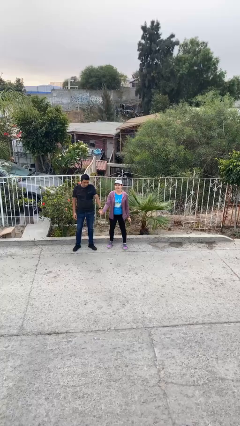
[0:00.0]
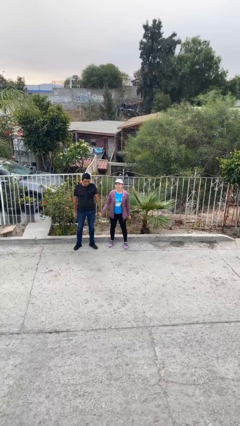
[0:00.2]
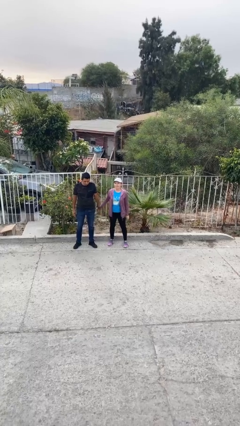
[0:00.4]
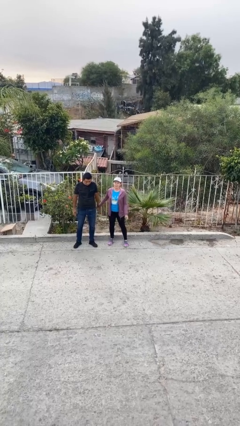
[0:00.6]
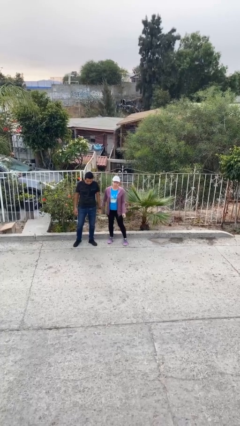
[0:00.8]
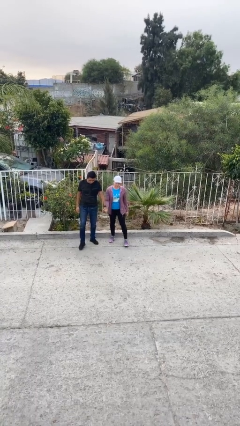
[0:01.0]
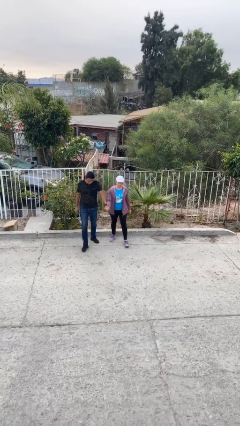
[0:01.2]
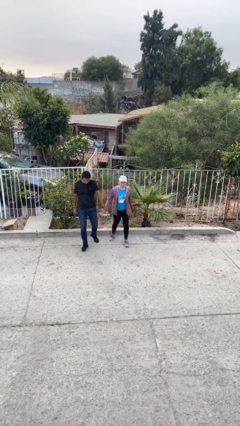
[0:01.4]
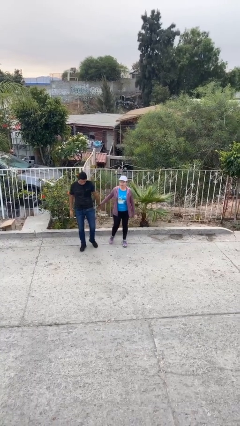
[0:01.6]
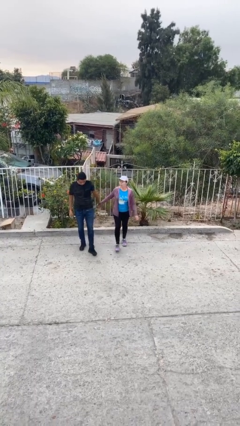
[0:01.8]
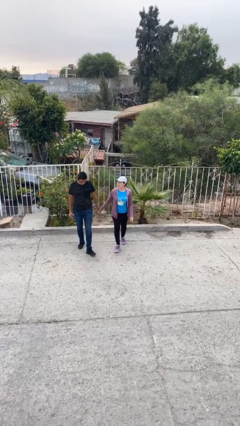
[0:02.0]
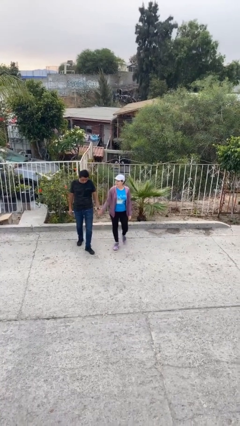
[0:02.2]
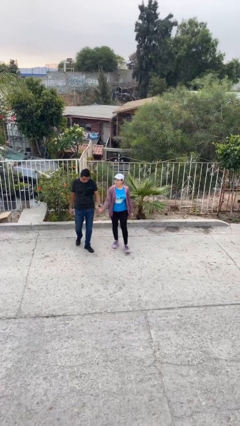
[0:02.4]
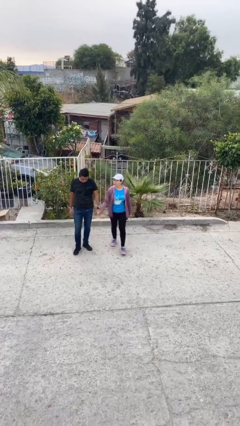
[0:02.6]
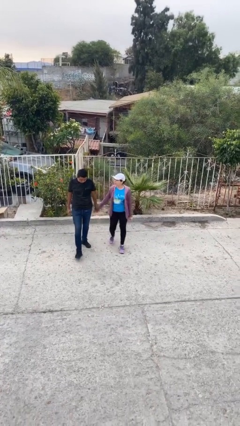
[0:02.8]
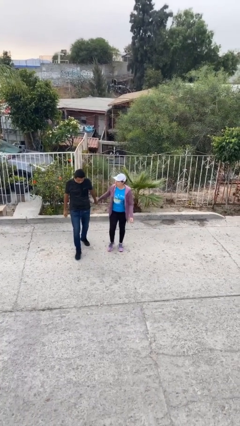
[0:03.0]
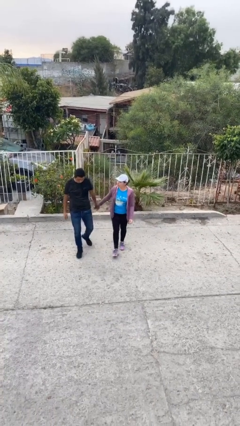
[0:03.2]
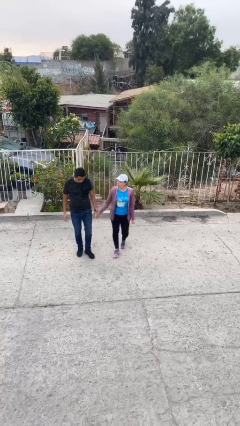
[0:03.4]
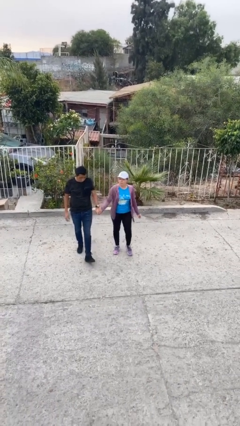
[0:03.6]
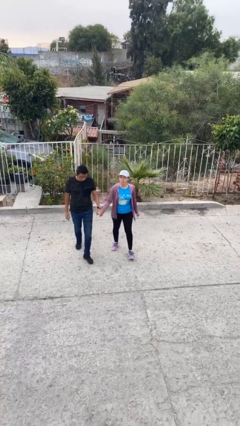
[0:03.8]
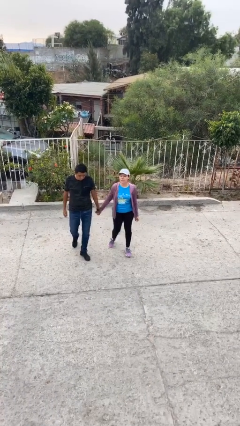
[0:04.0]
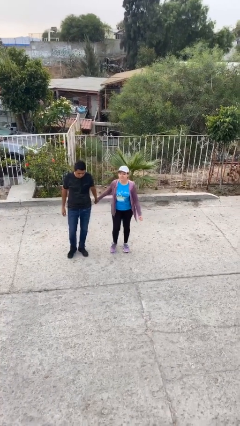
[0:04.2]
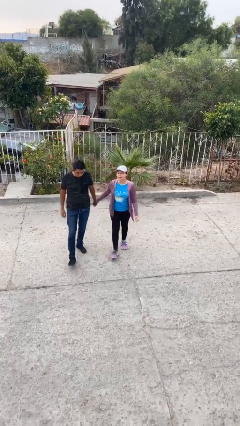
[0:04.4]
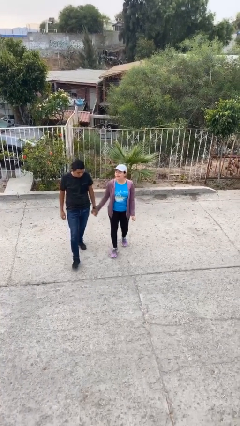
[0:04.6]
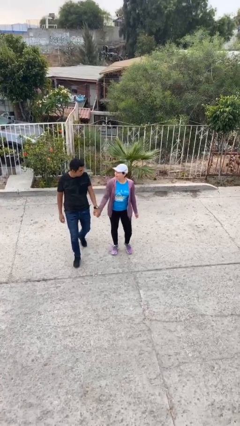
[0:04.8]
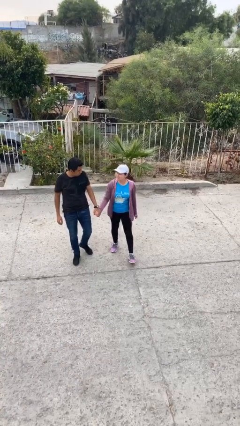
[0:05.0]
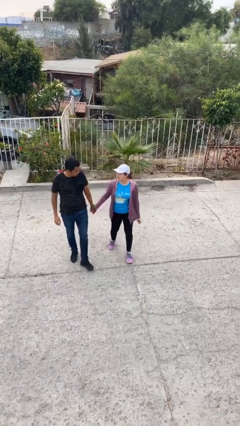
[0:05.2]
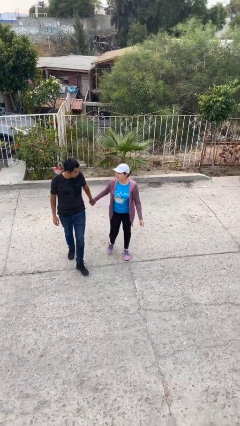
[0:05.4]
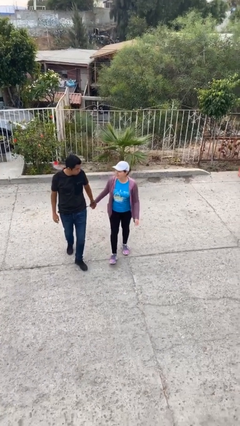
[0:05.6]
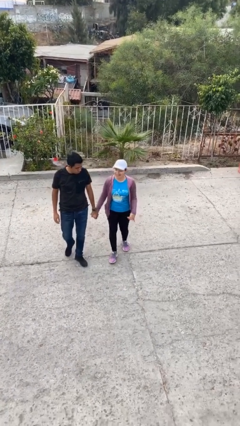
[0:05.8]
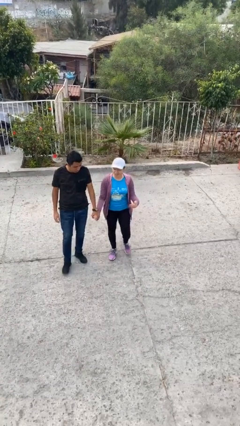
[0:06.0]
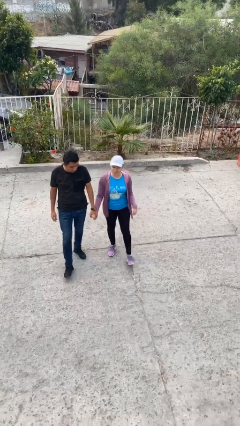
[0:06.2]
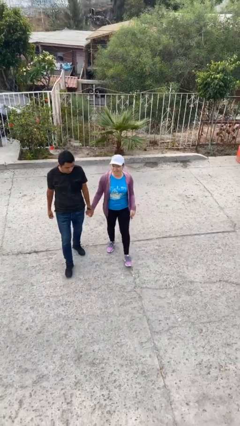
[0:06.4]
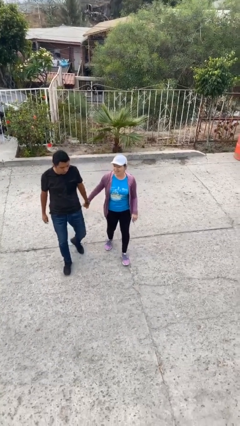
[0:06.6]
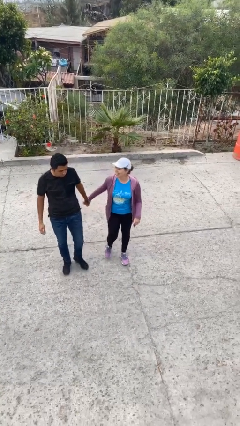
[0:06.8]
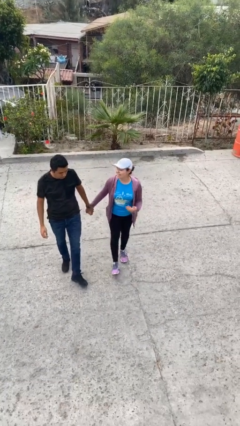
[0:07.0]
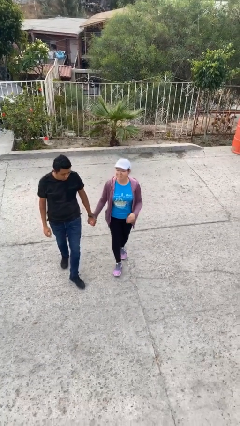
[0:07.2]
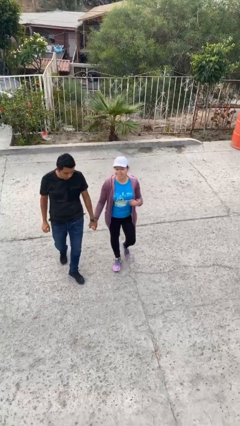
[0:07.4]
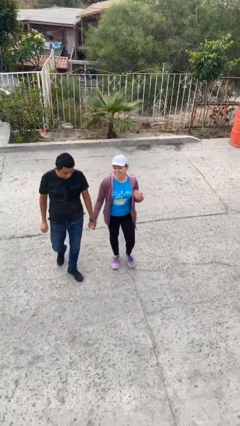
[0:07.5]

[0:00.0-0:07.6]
person holds hand

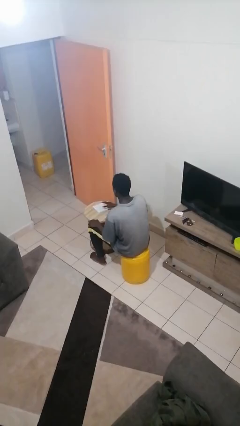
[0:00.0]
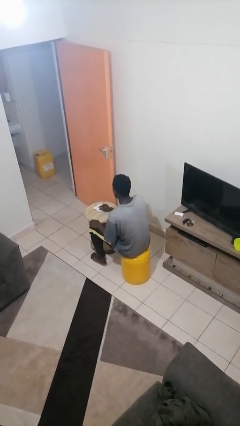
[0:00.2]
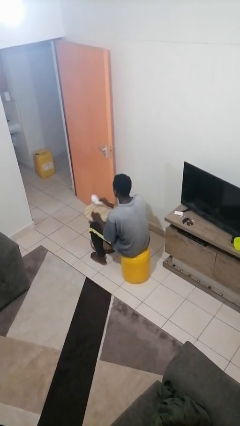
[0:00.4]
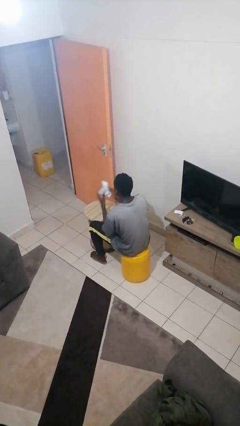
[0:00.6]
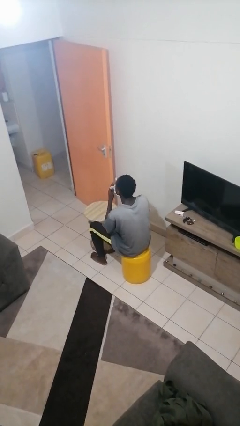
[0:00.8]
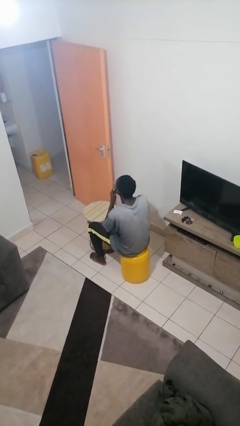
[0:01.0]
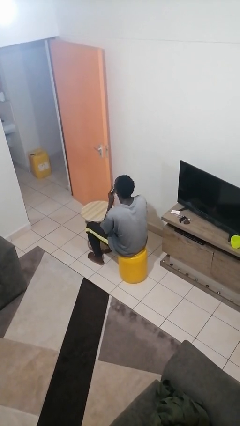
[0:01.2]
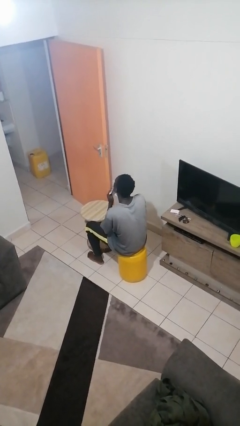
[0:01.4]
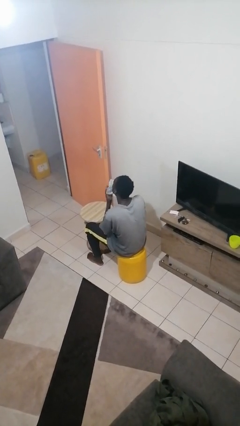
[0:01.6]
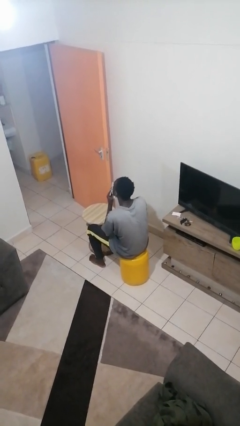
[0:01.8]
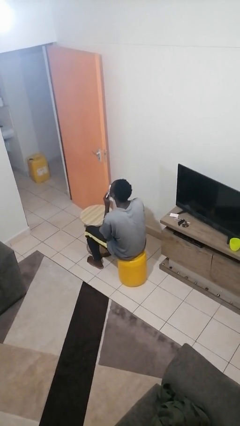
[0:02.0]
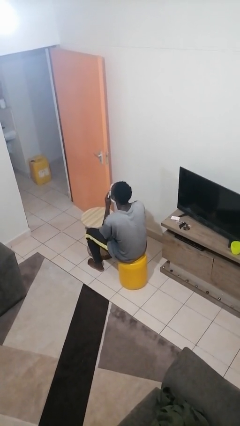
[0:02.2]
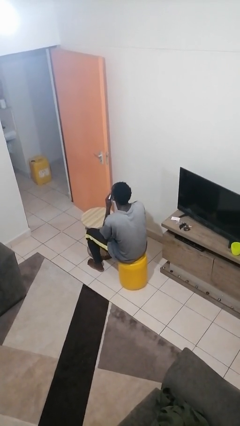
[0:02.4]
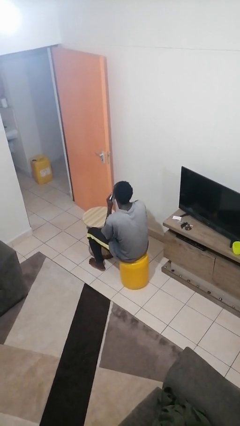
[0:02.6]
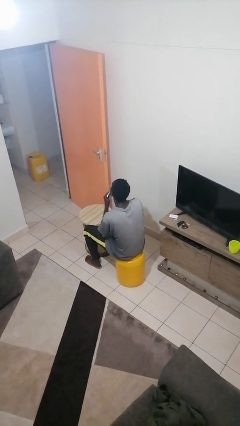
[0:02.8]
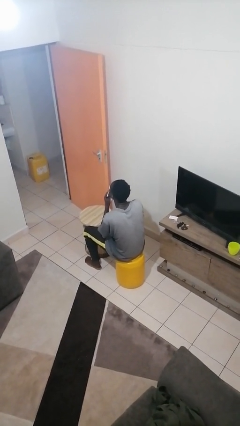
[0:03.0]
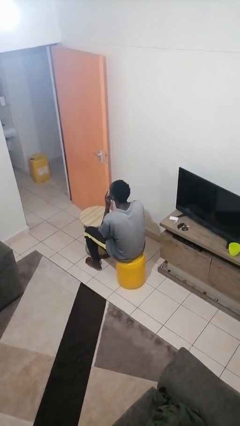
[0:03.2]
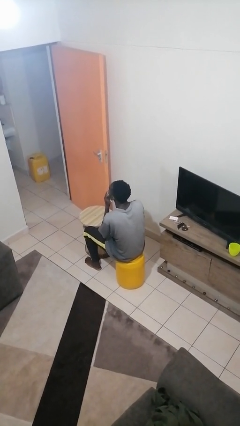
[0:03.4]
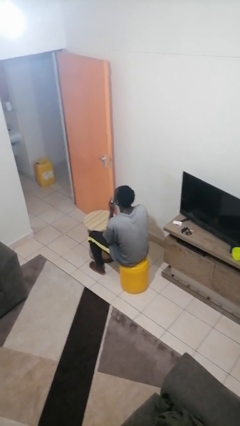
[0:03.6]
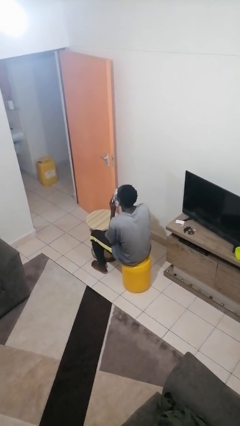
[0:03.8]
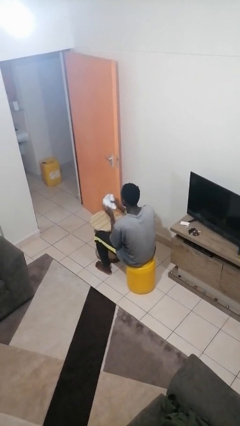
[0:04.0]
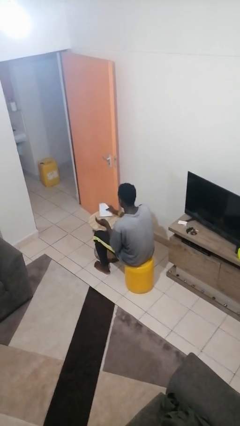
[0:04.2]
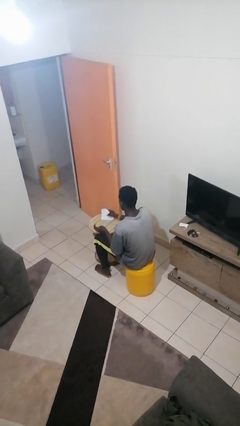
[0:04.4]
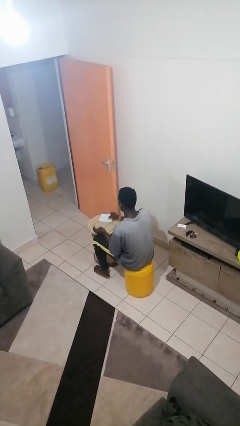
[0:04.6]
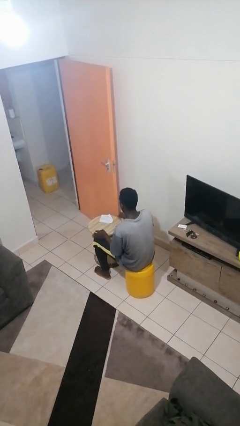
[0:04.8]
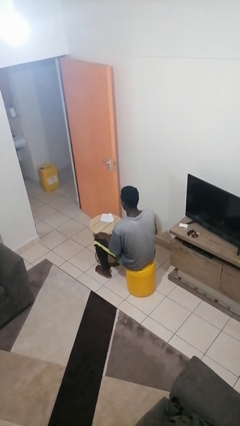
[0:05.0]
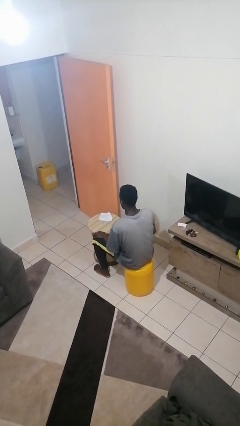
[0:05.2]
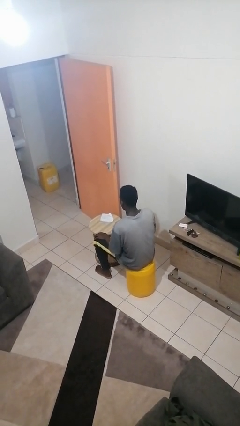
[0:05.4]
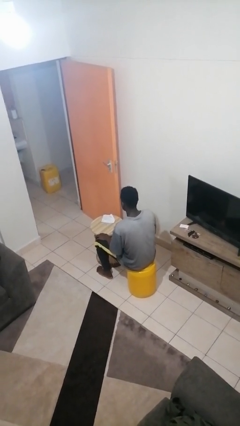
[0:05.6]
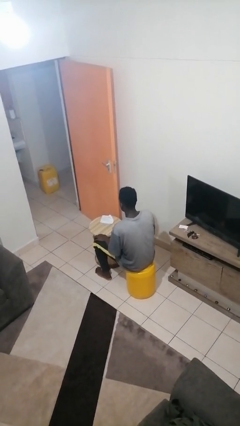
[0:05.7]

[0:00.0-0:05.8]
person wipes mouth with napkin

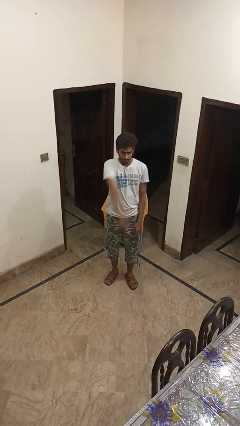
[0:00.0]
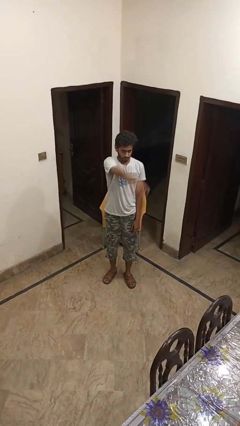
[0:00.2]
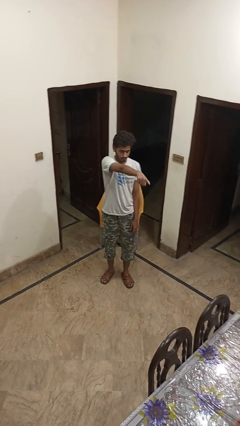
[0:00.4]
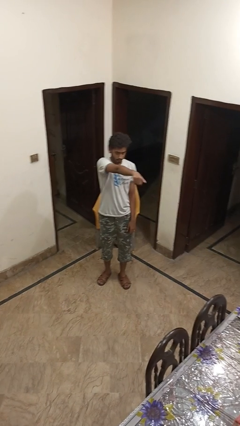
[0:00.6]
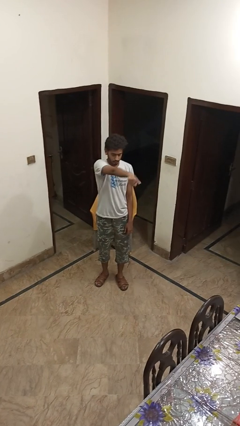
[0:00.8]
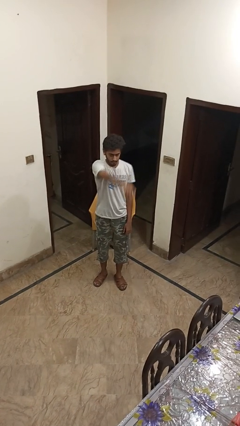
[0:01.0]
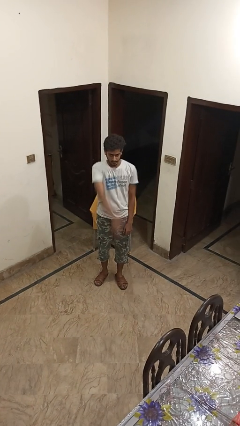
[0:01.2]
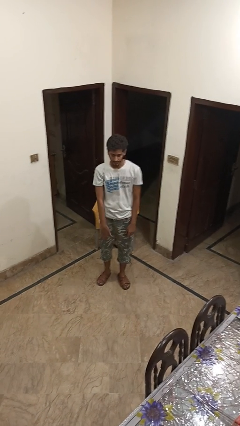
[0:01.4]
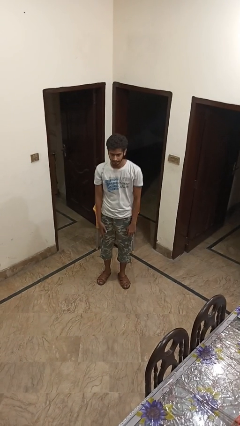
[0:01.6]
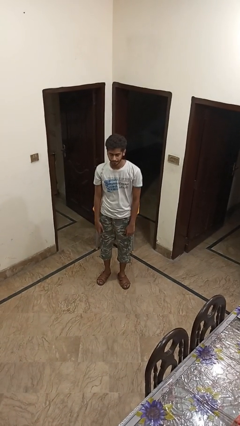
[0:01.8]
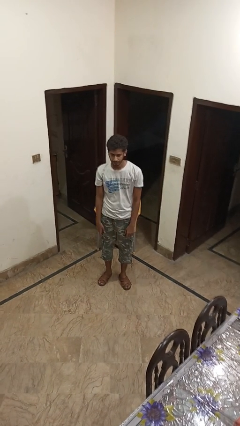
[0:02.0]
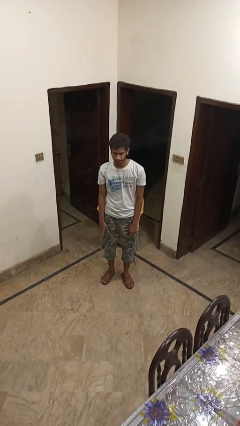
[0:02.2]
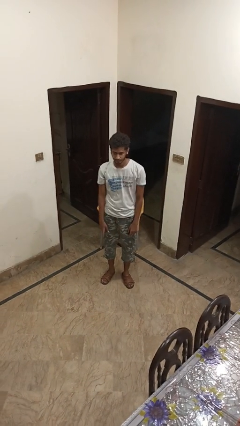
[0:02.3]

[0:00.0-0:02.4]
person points at person

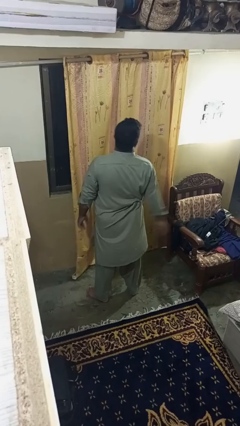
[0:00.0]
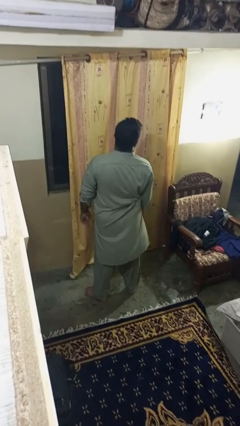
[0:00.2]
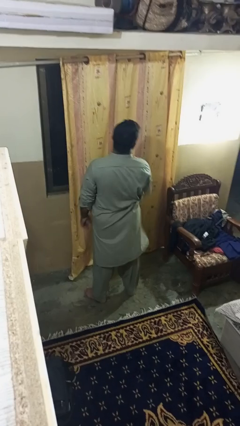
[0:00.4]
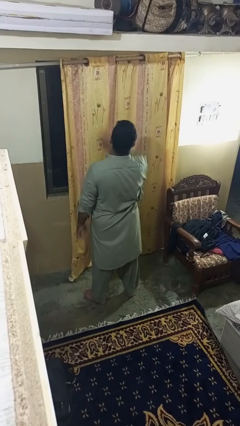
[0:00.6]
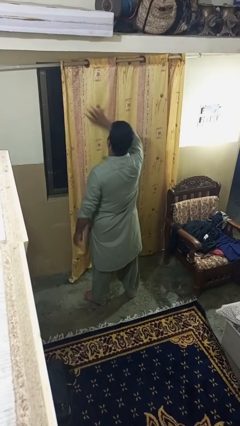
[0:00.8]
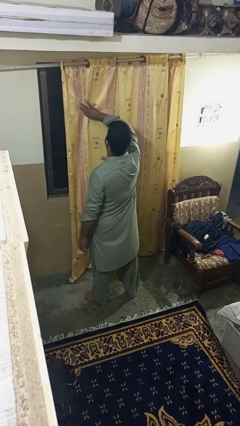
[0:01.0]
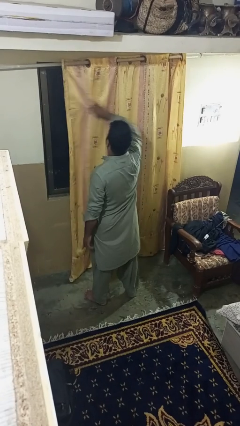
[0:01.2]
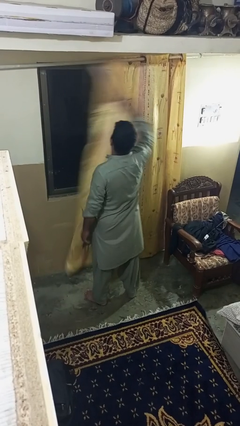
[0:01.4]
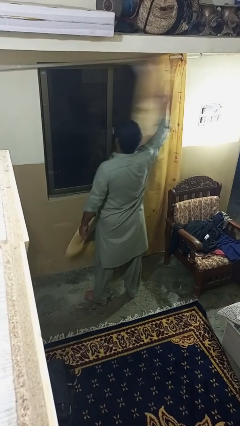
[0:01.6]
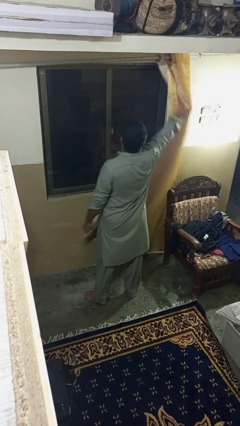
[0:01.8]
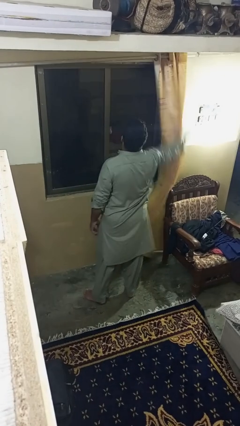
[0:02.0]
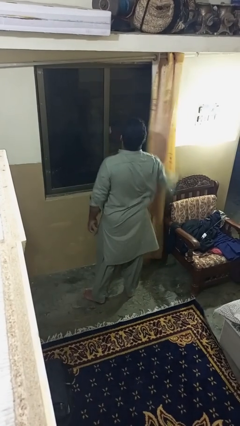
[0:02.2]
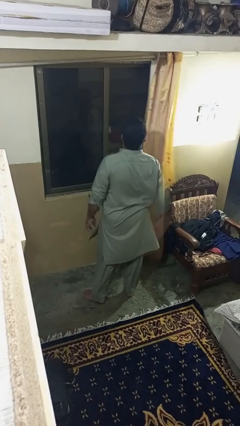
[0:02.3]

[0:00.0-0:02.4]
person opens curtains
